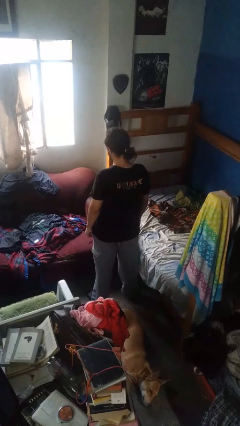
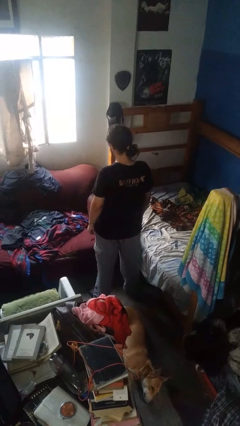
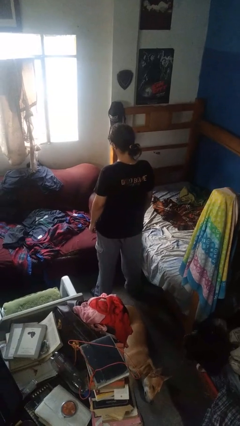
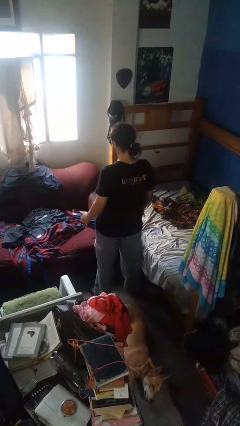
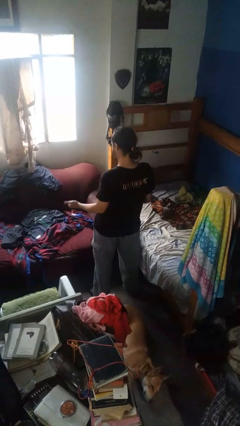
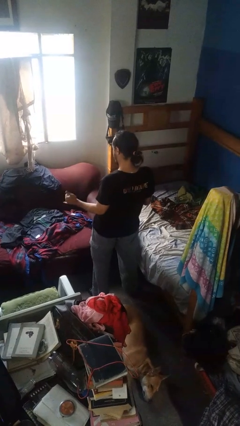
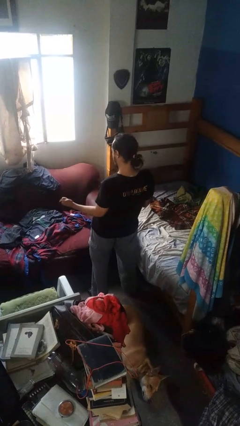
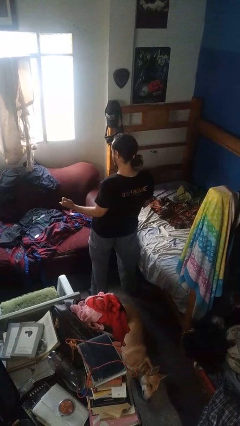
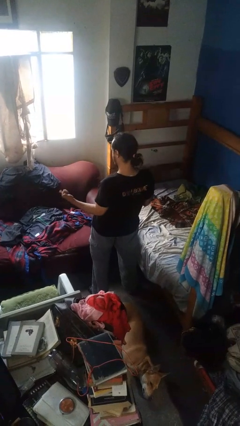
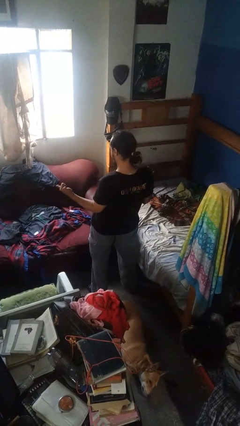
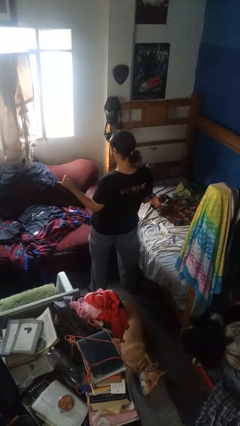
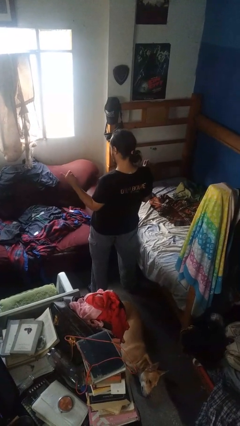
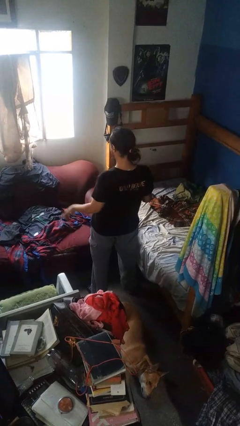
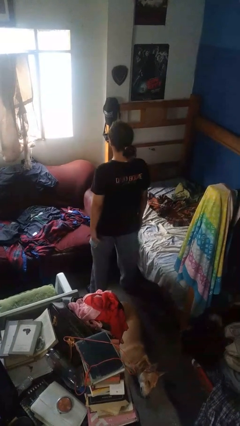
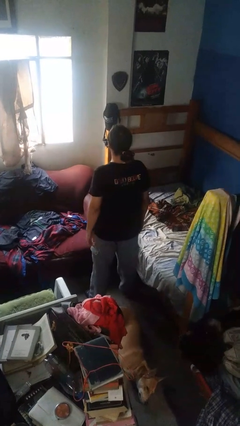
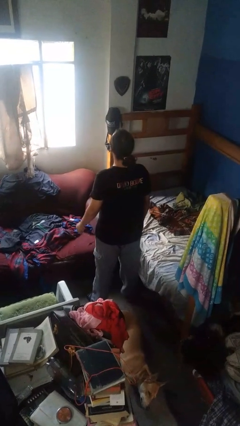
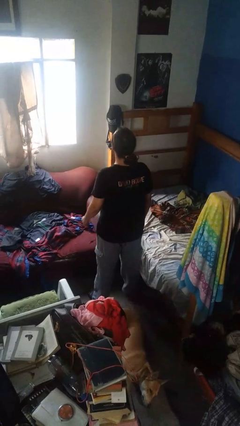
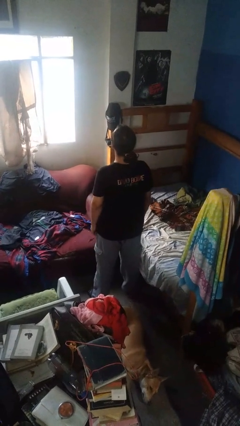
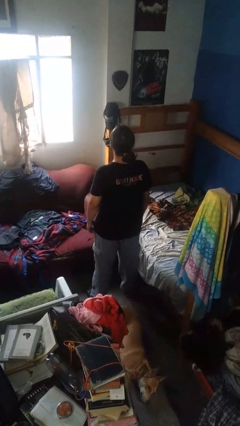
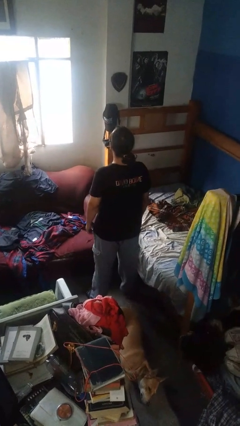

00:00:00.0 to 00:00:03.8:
person gestures hang loose

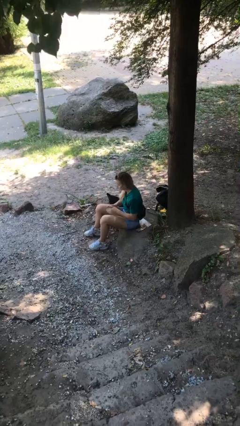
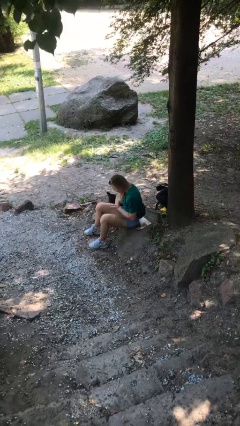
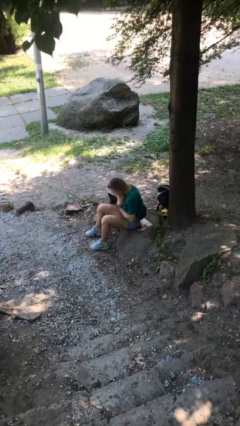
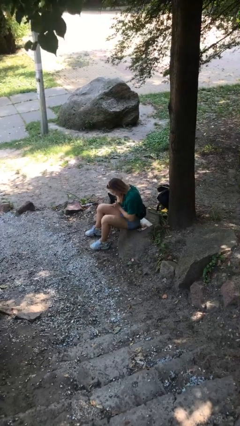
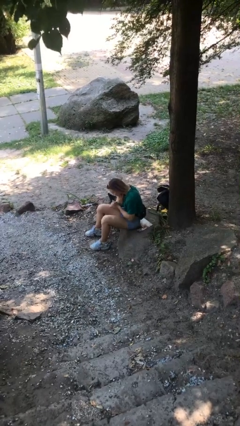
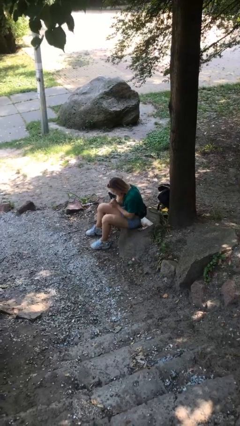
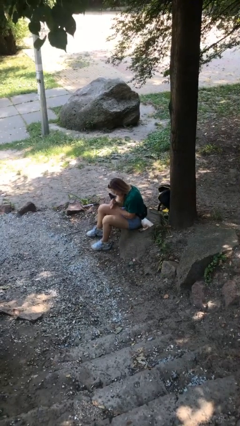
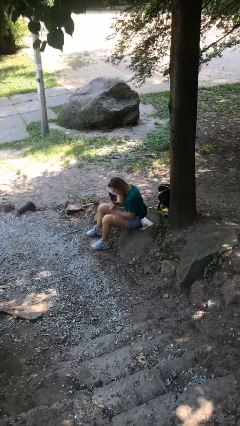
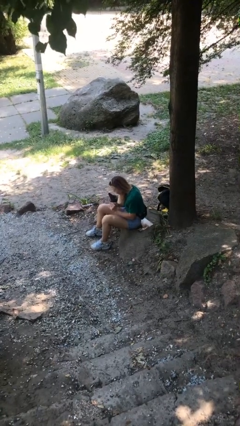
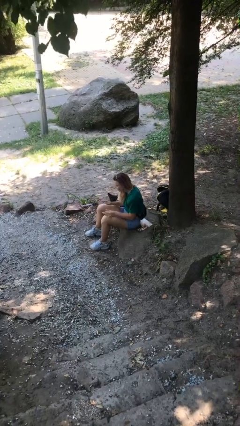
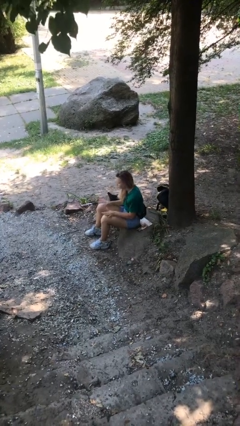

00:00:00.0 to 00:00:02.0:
person looks at hands in lap

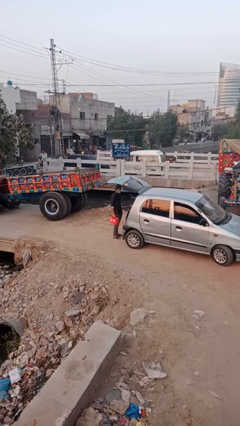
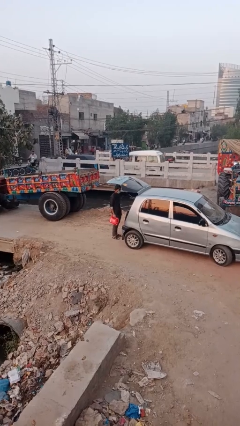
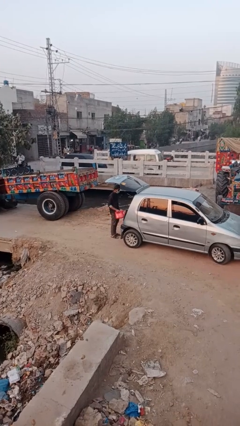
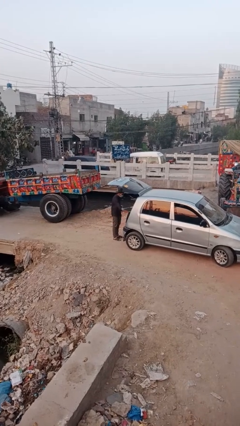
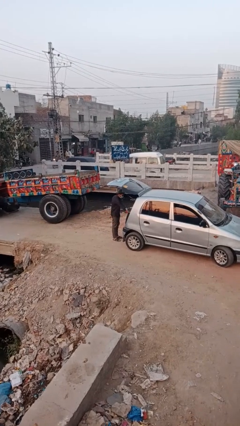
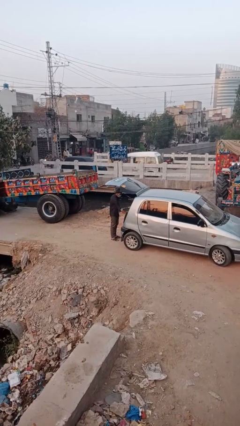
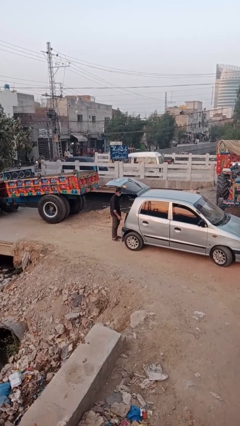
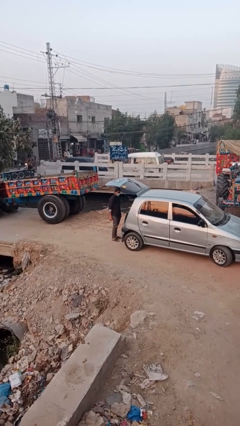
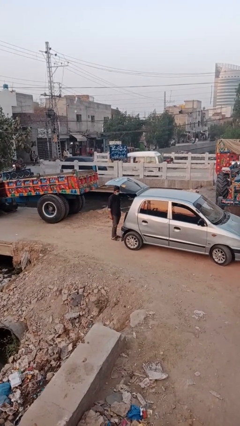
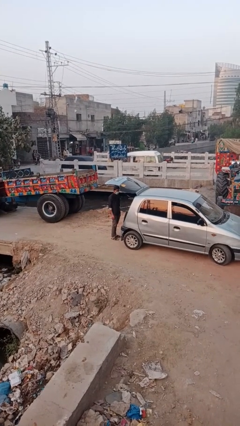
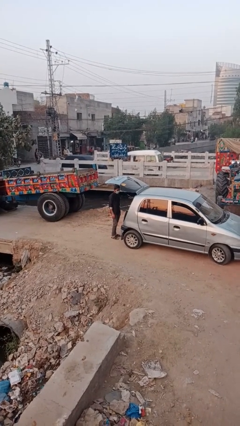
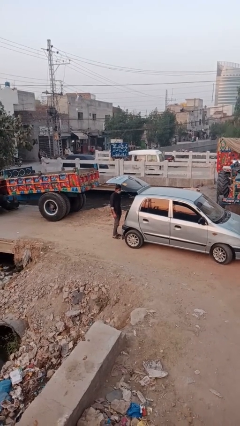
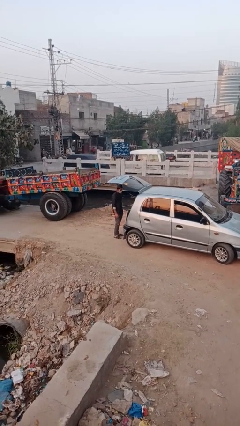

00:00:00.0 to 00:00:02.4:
person loads car

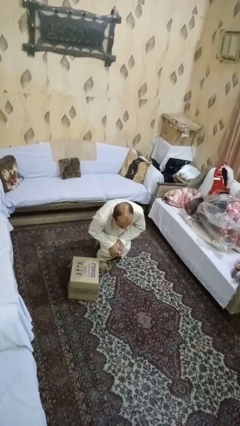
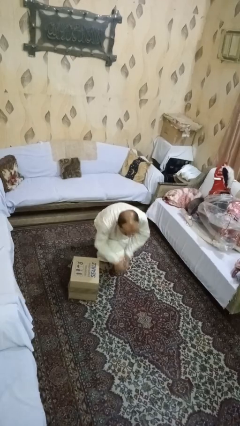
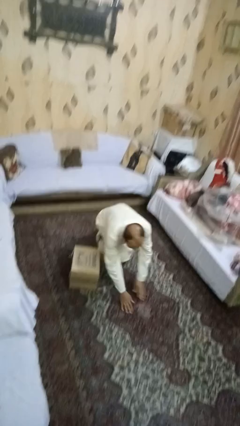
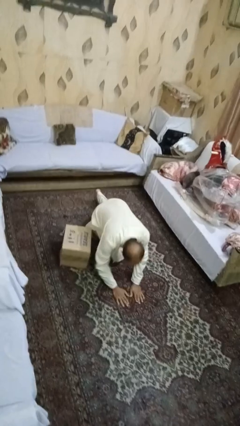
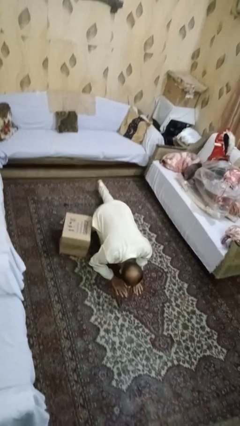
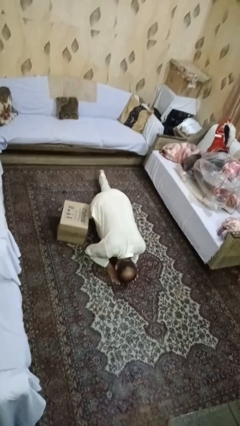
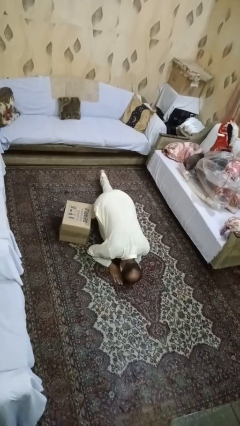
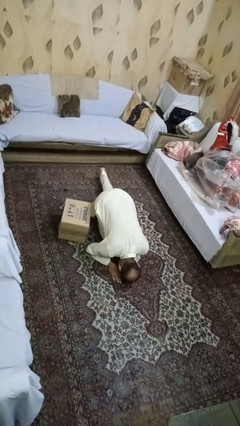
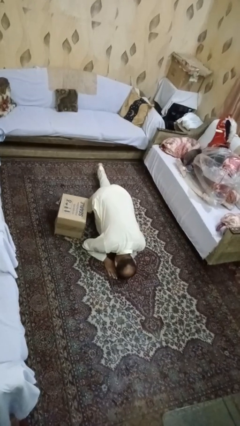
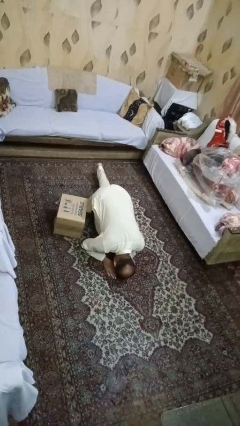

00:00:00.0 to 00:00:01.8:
person lies down on floor

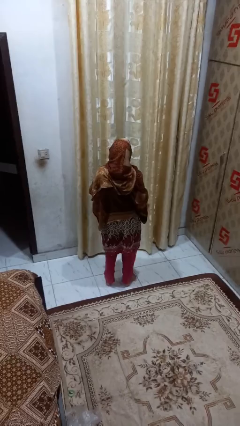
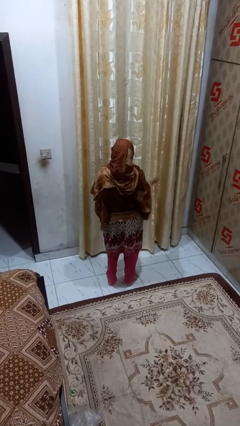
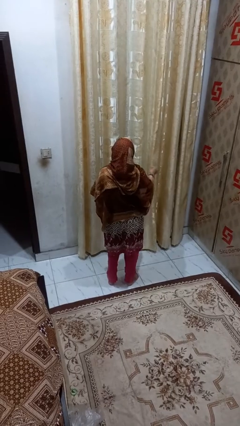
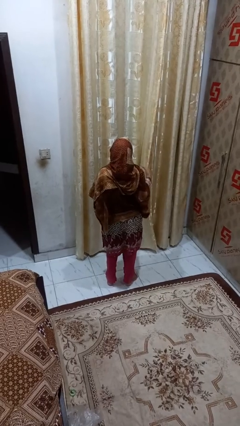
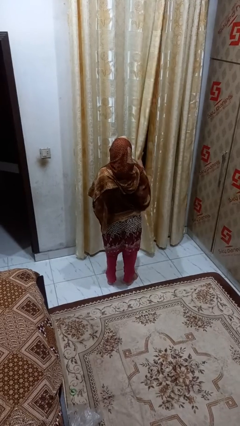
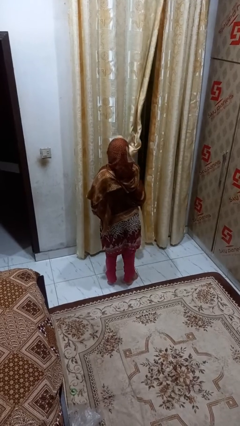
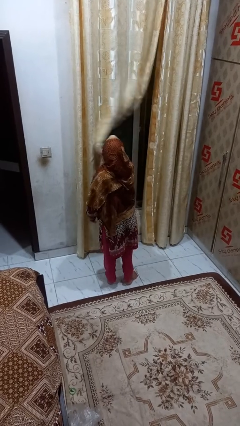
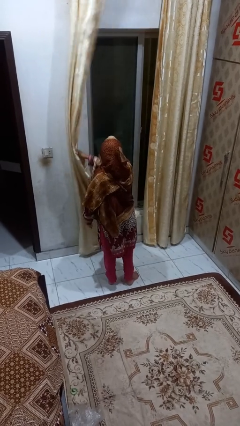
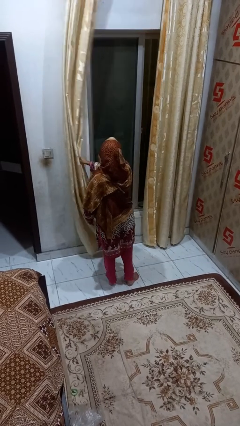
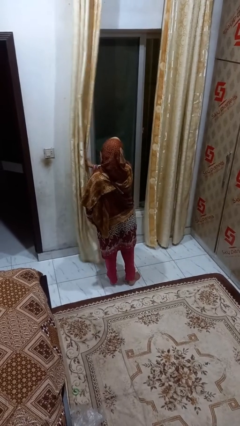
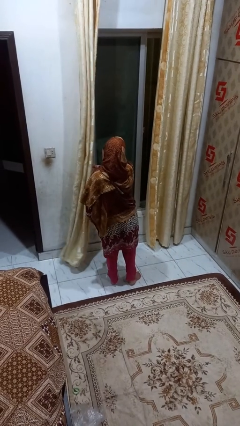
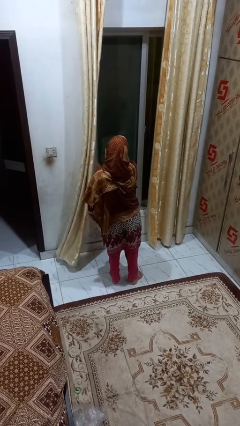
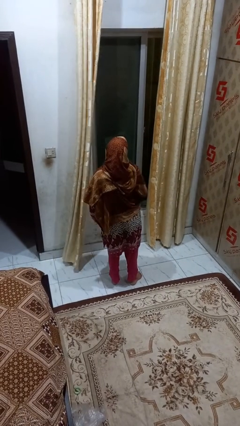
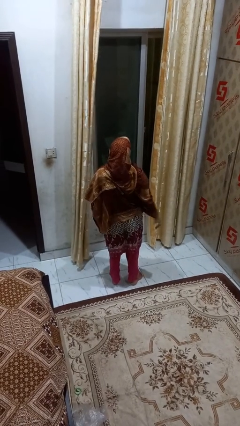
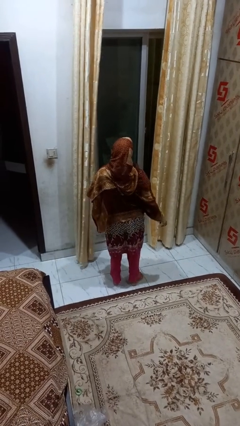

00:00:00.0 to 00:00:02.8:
person opens curtains

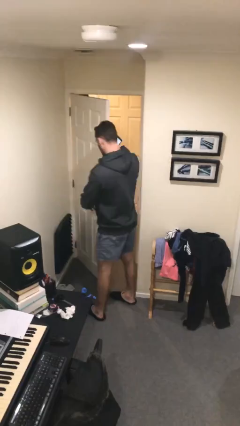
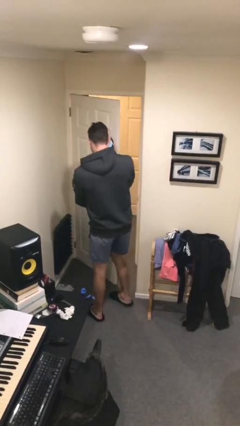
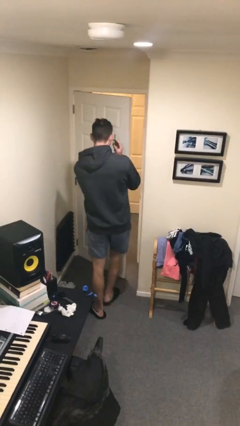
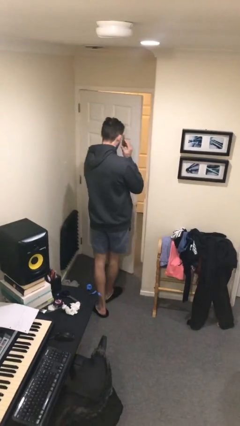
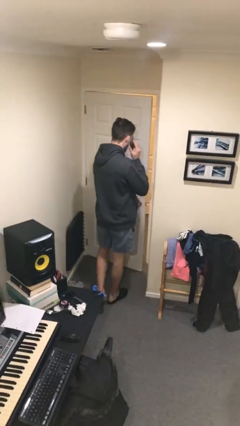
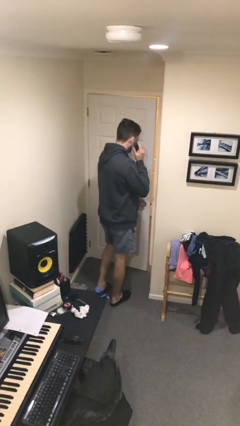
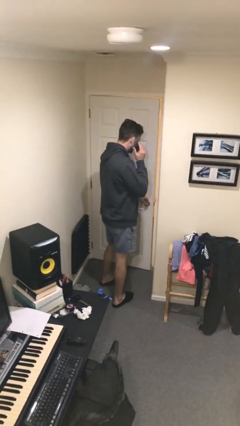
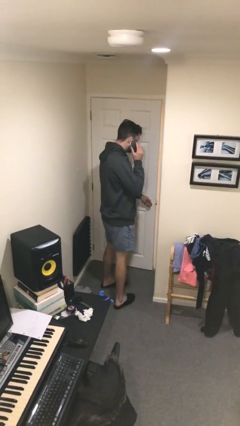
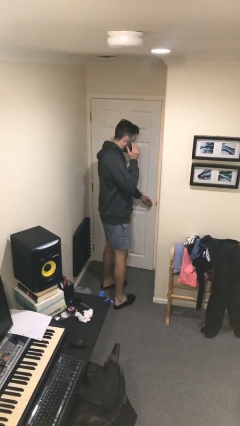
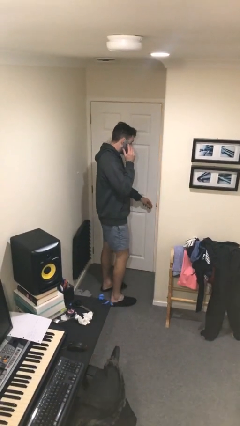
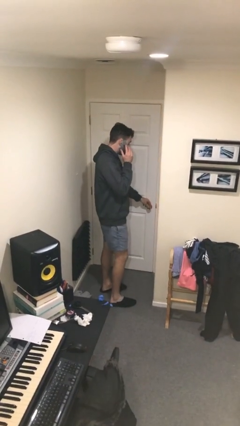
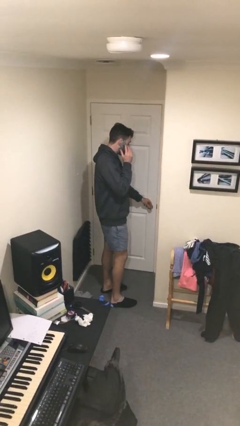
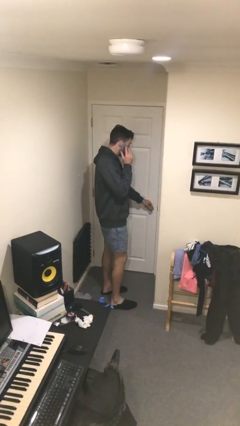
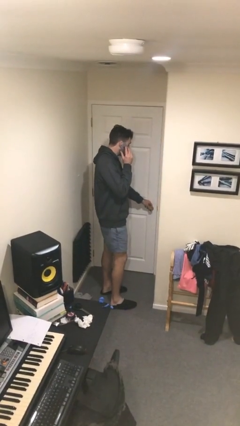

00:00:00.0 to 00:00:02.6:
person closes facility door

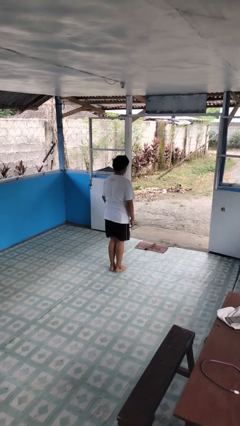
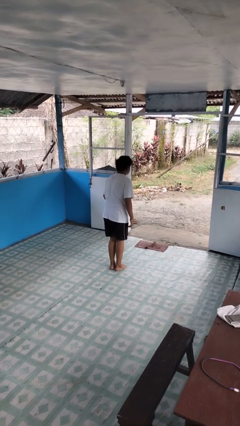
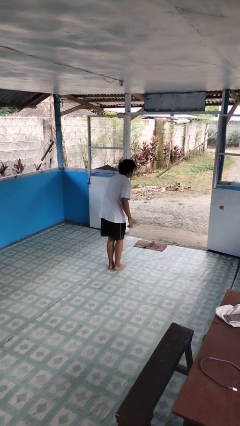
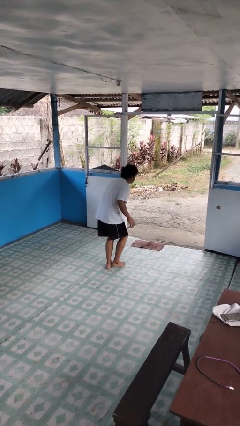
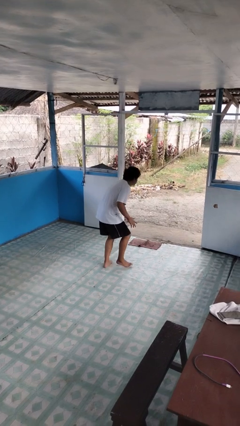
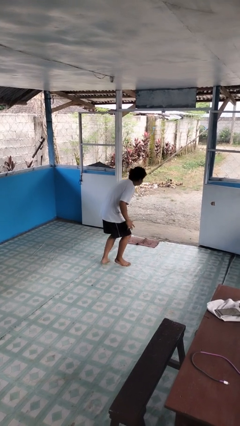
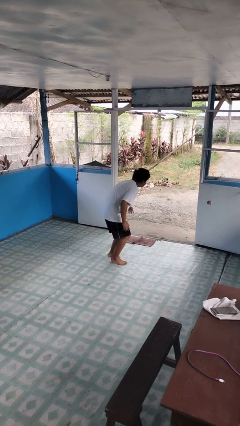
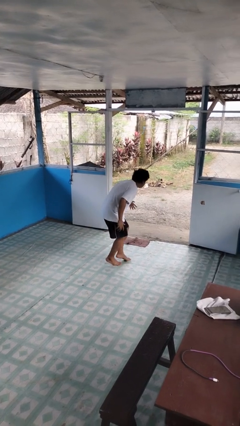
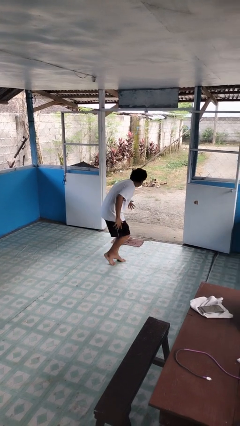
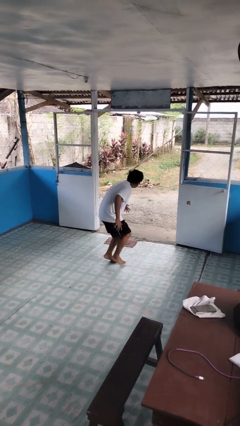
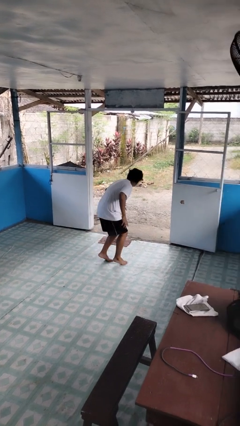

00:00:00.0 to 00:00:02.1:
person walks tiptoe
